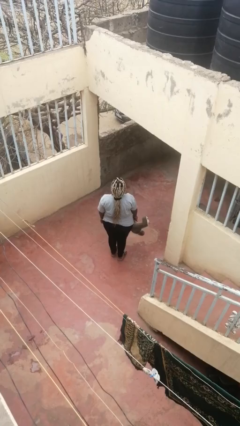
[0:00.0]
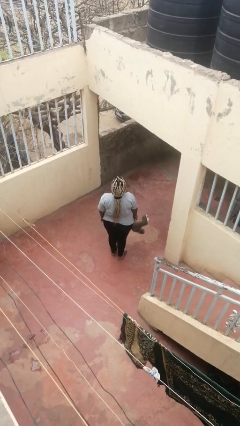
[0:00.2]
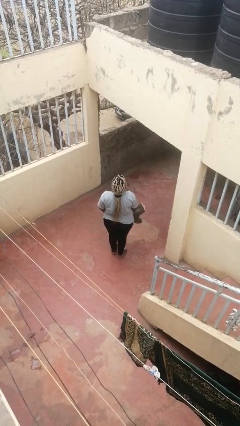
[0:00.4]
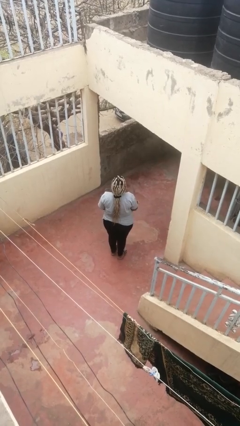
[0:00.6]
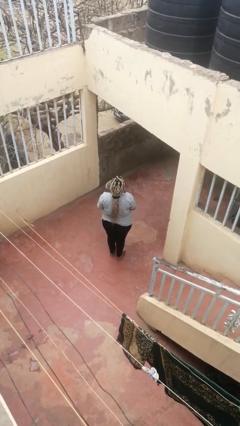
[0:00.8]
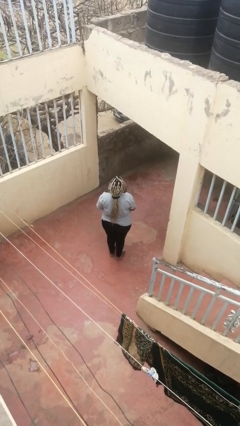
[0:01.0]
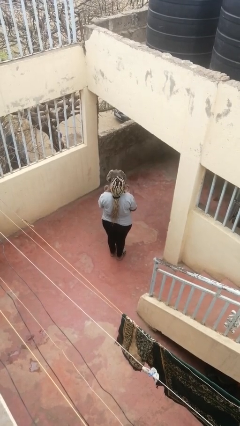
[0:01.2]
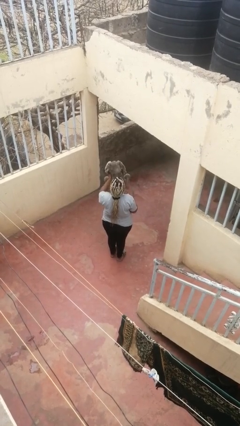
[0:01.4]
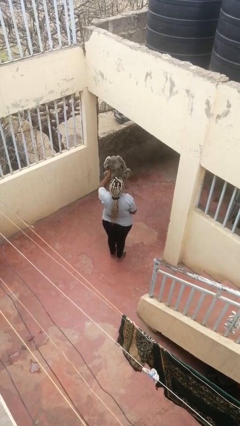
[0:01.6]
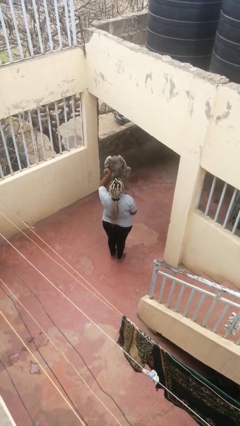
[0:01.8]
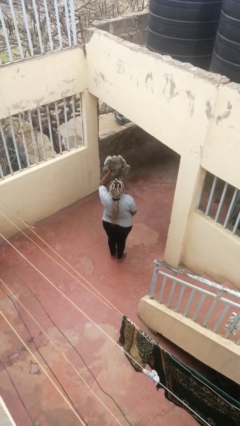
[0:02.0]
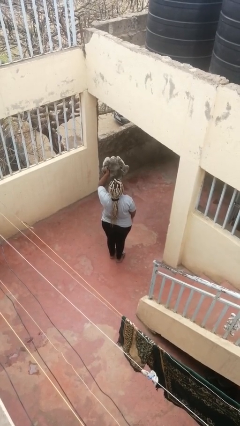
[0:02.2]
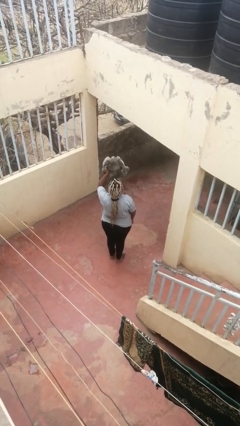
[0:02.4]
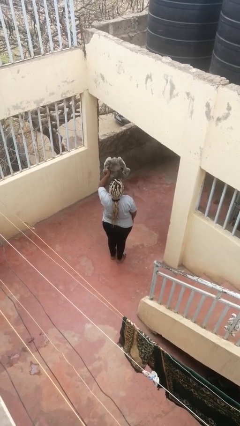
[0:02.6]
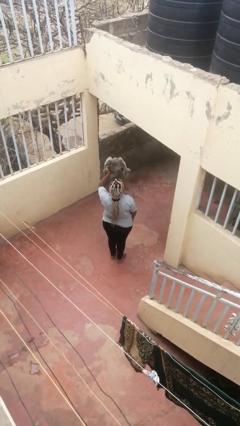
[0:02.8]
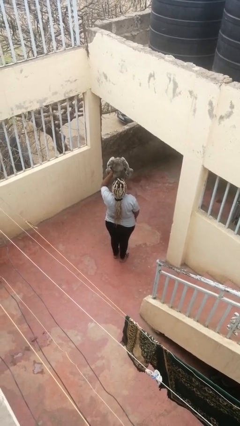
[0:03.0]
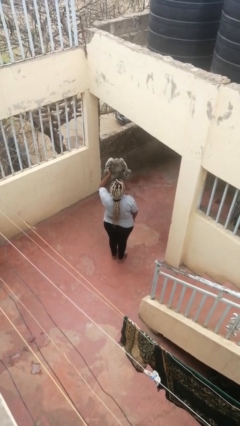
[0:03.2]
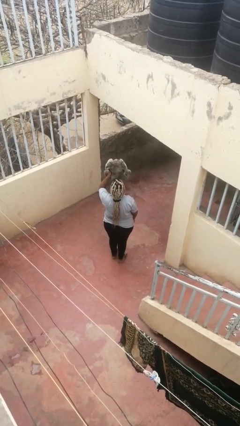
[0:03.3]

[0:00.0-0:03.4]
person holds object above head

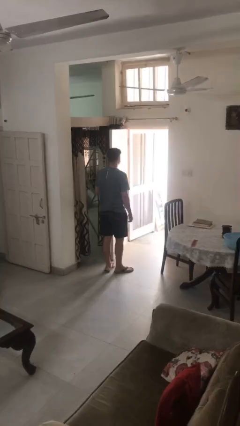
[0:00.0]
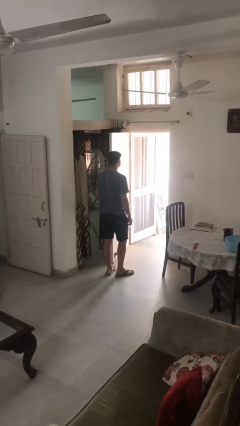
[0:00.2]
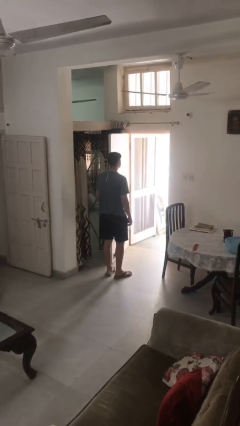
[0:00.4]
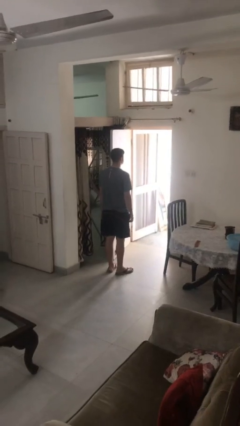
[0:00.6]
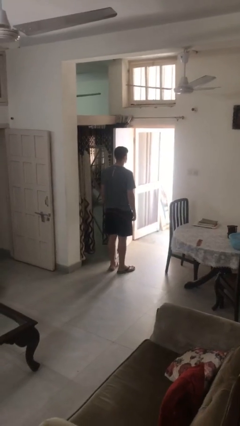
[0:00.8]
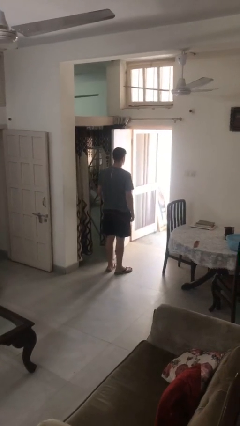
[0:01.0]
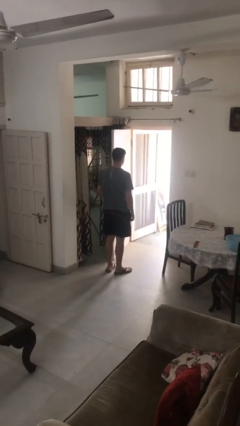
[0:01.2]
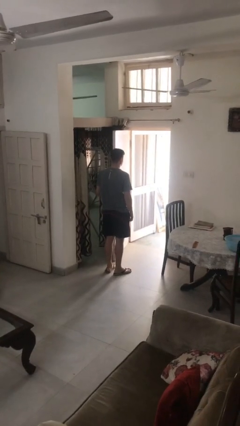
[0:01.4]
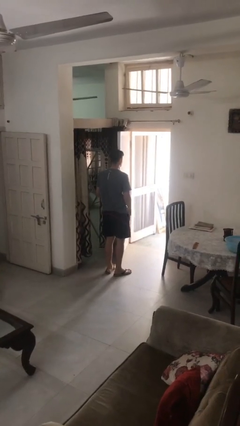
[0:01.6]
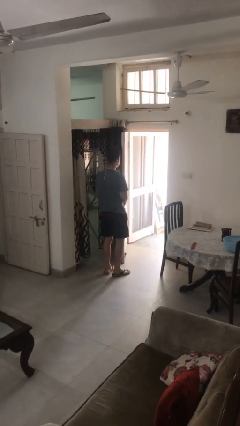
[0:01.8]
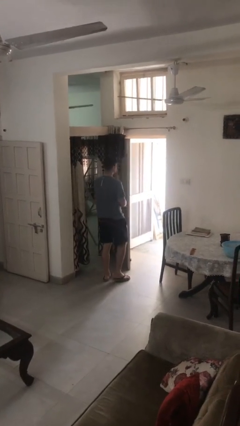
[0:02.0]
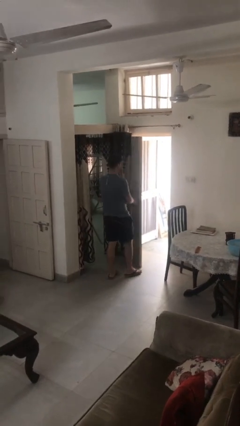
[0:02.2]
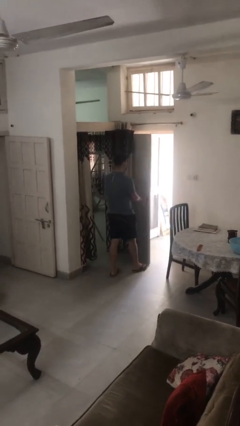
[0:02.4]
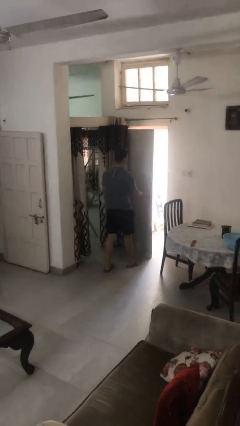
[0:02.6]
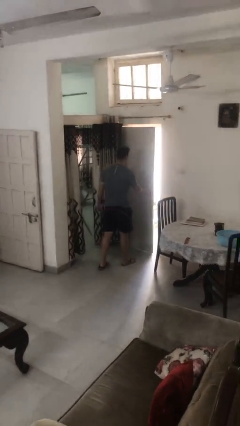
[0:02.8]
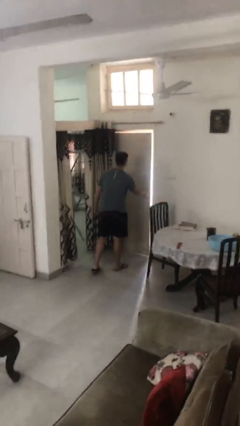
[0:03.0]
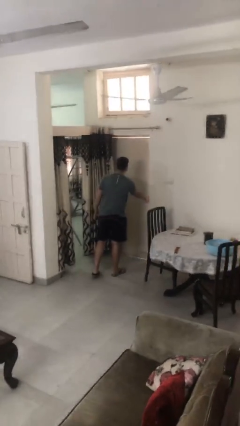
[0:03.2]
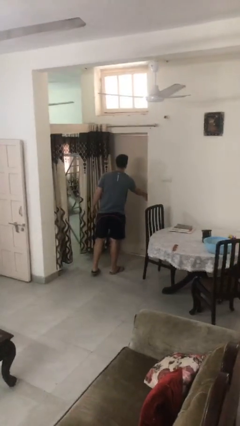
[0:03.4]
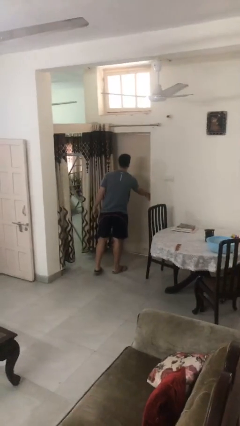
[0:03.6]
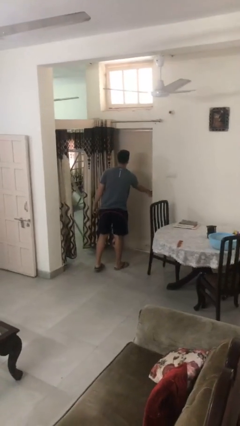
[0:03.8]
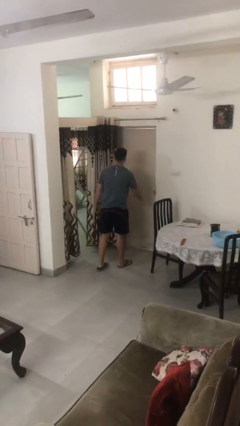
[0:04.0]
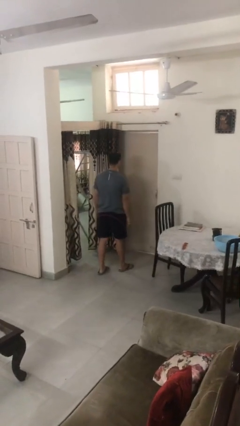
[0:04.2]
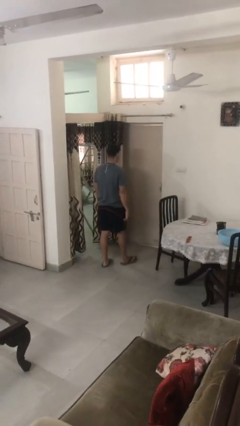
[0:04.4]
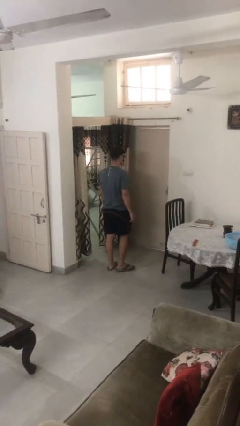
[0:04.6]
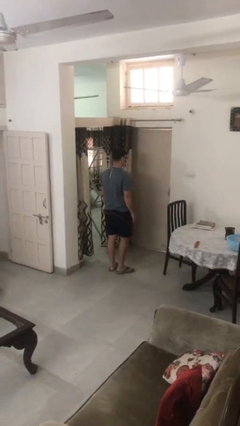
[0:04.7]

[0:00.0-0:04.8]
person closes facility door

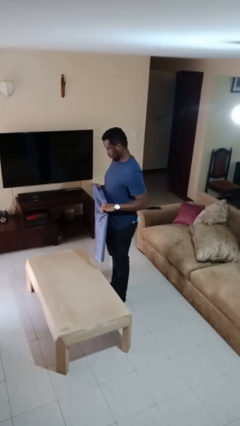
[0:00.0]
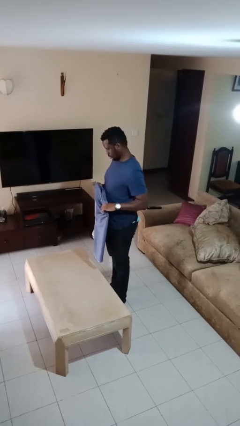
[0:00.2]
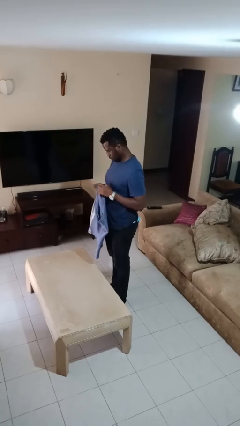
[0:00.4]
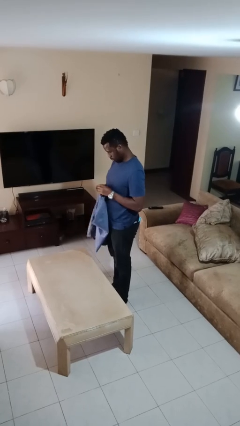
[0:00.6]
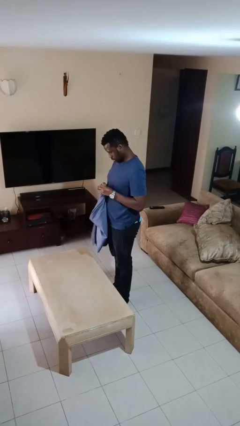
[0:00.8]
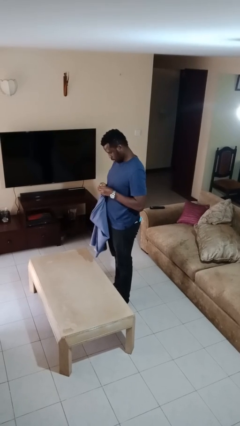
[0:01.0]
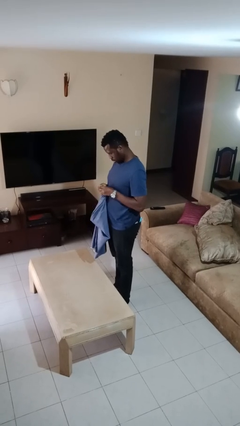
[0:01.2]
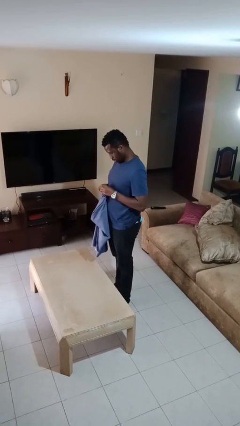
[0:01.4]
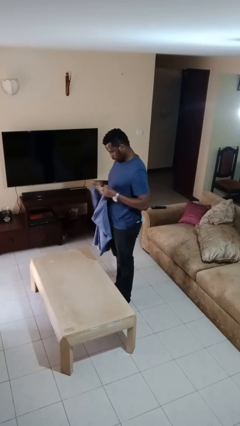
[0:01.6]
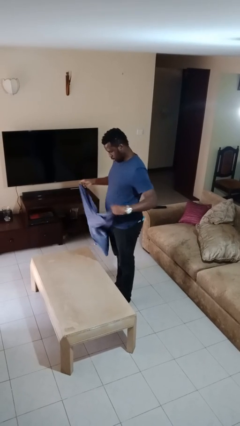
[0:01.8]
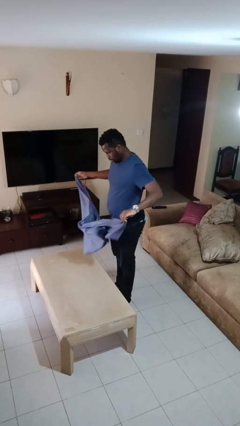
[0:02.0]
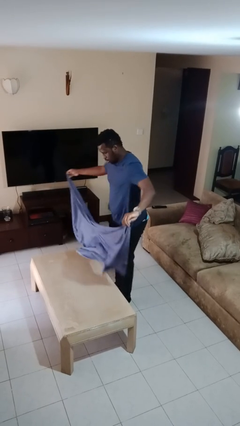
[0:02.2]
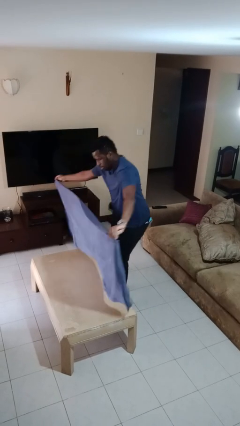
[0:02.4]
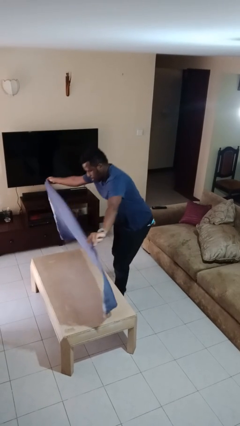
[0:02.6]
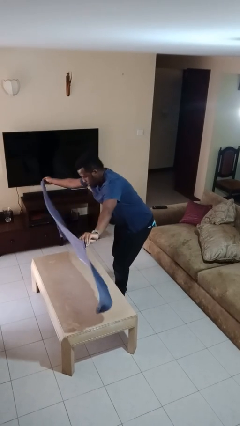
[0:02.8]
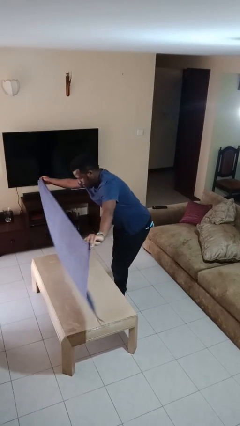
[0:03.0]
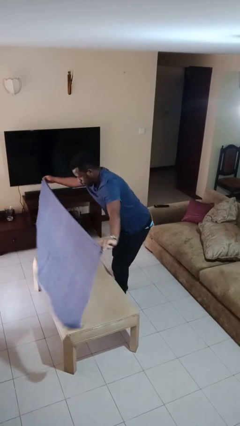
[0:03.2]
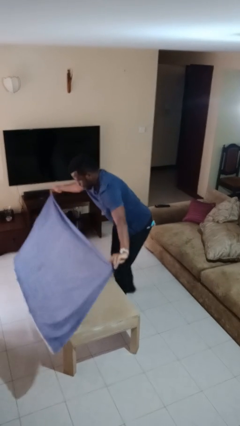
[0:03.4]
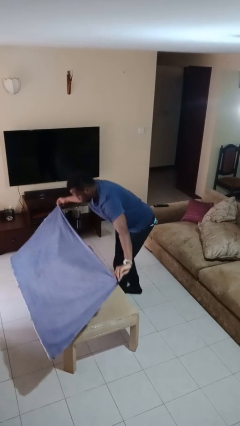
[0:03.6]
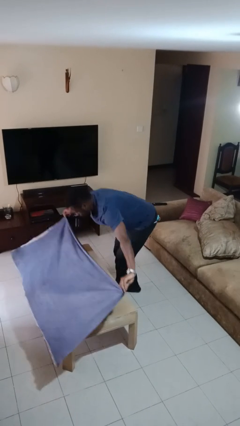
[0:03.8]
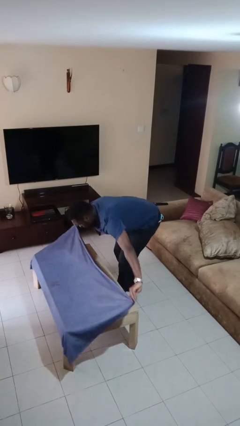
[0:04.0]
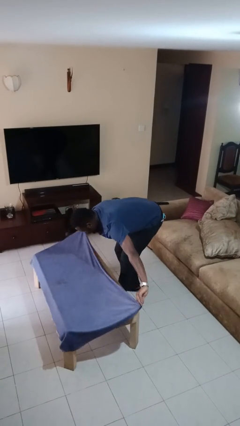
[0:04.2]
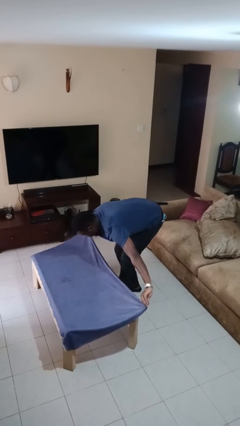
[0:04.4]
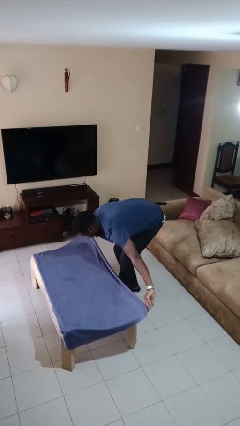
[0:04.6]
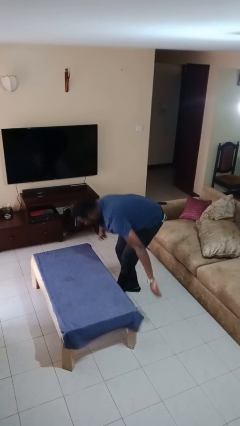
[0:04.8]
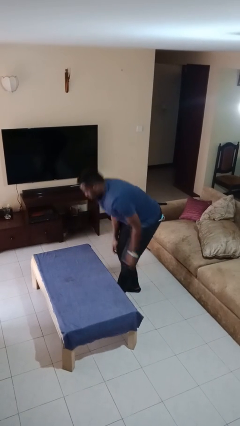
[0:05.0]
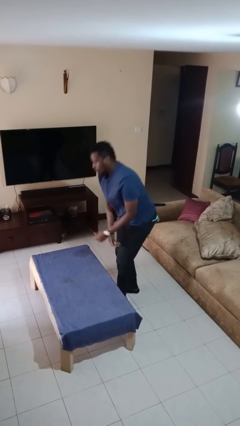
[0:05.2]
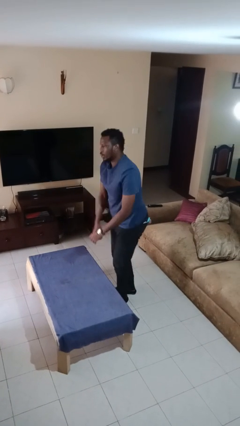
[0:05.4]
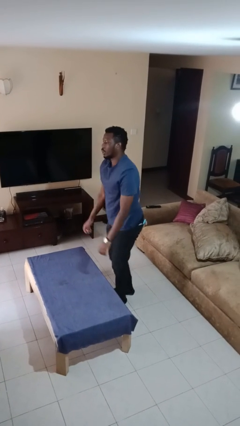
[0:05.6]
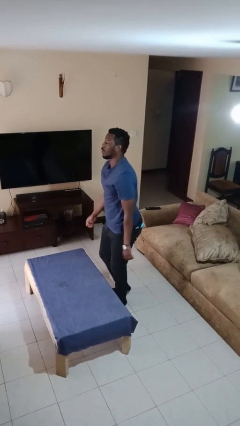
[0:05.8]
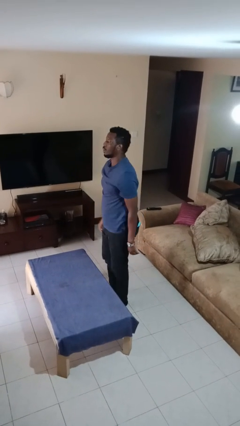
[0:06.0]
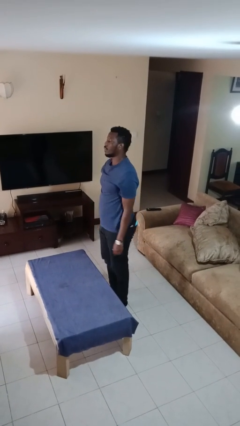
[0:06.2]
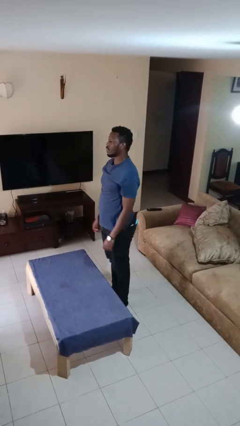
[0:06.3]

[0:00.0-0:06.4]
person spreads tablecloth

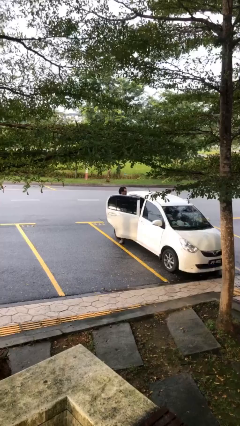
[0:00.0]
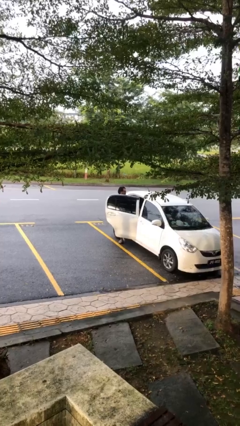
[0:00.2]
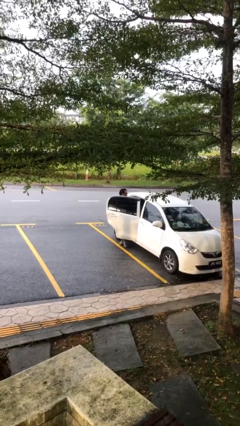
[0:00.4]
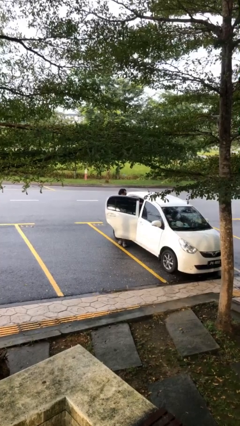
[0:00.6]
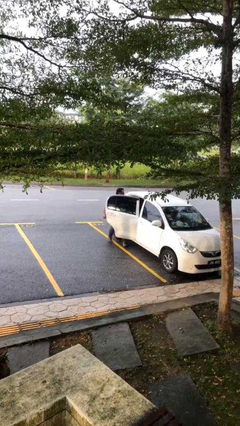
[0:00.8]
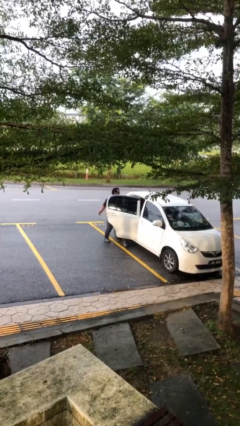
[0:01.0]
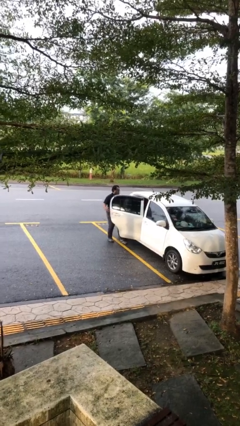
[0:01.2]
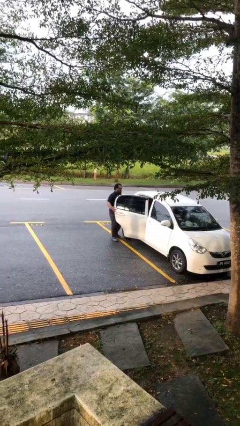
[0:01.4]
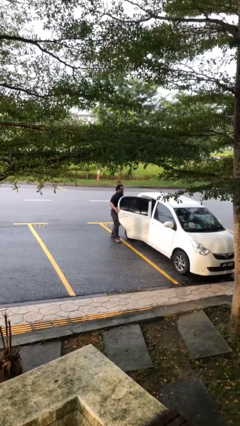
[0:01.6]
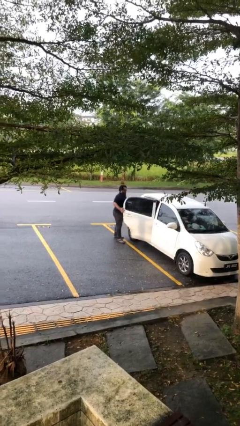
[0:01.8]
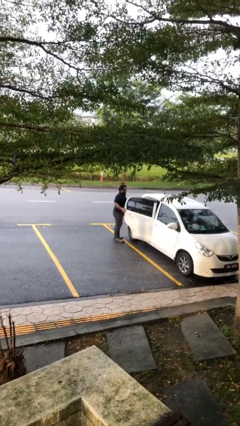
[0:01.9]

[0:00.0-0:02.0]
person exits car

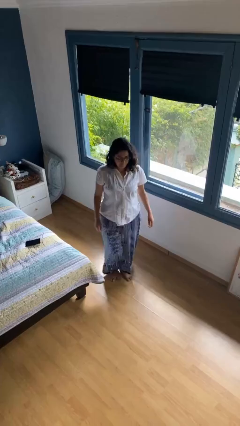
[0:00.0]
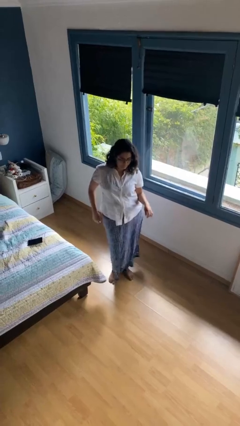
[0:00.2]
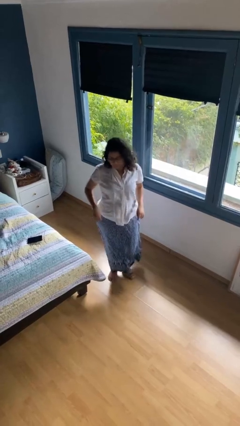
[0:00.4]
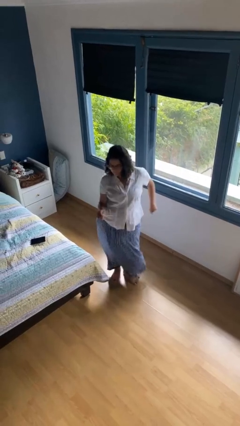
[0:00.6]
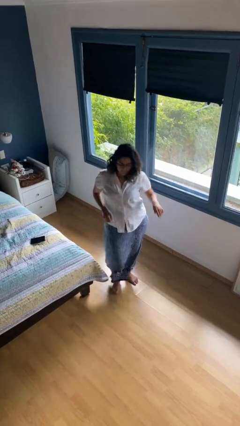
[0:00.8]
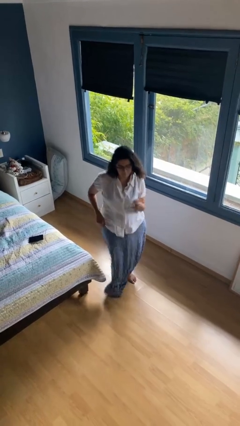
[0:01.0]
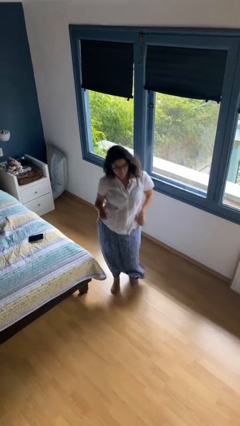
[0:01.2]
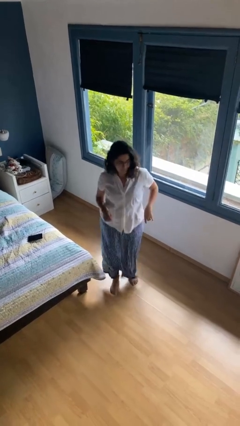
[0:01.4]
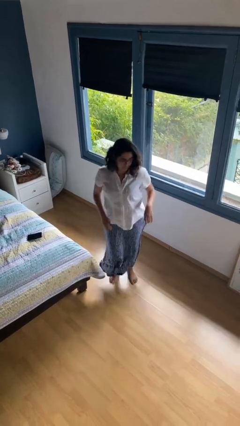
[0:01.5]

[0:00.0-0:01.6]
person dances in place
